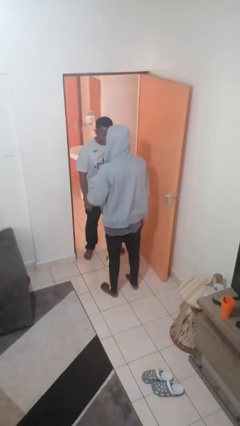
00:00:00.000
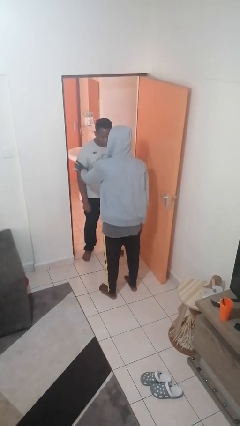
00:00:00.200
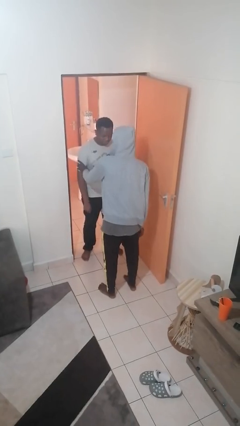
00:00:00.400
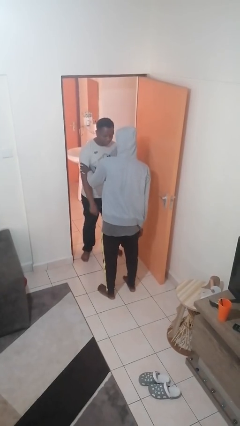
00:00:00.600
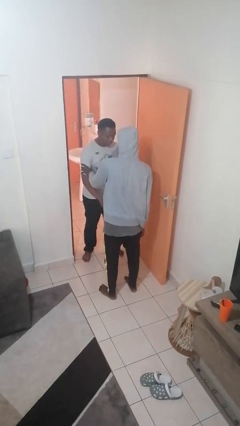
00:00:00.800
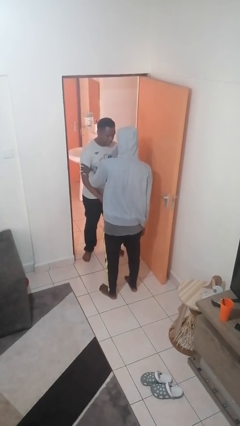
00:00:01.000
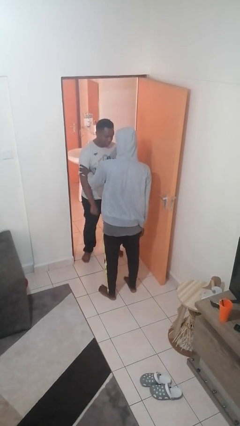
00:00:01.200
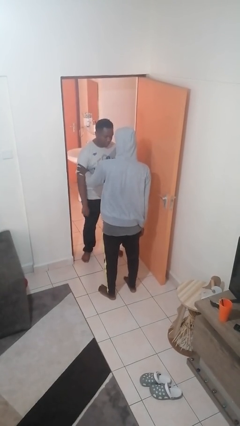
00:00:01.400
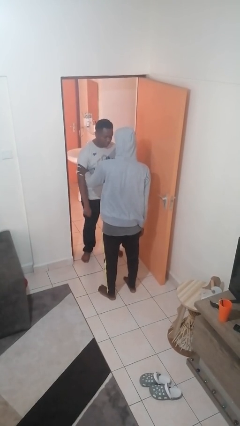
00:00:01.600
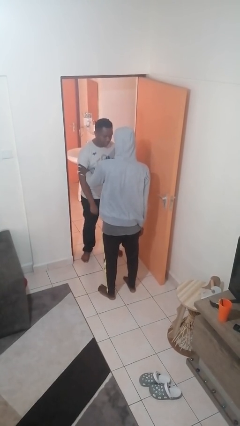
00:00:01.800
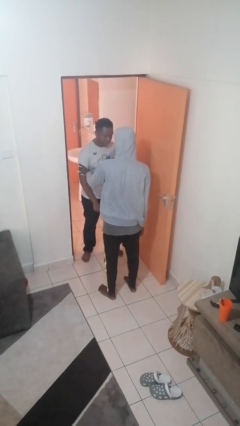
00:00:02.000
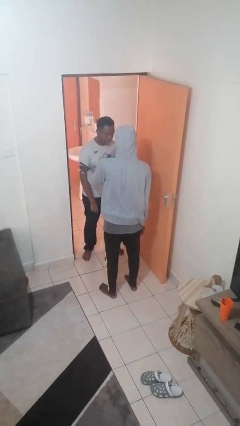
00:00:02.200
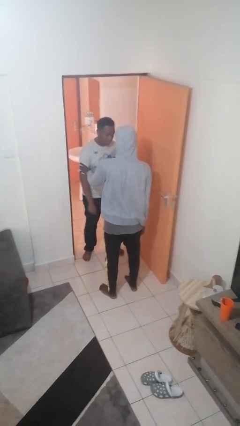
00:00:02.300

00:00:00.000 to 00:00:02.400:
person grabs person by bicep

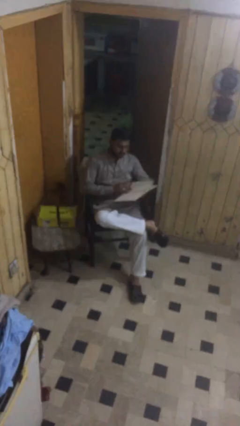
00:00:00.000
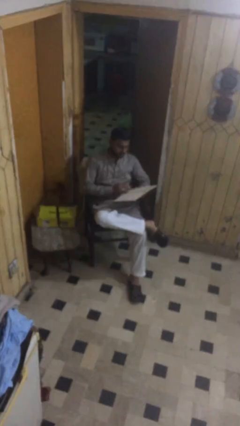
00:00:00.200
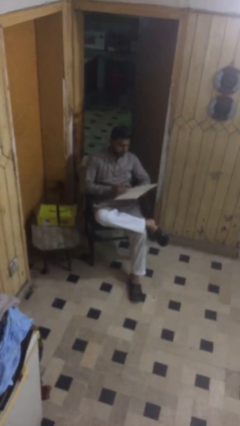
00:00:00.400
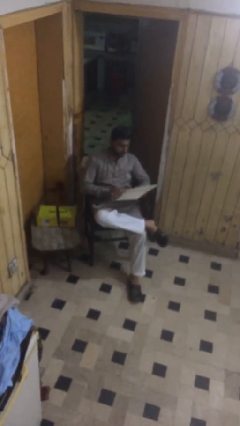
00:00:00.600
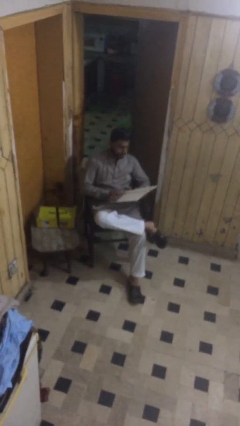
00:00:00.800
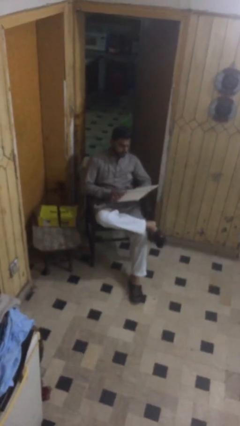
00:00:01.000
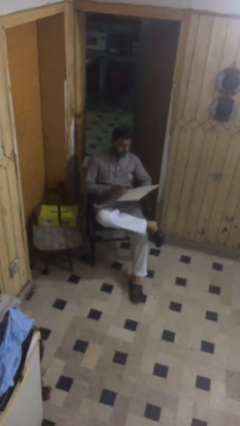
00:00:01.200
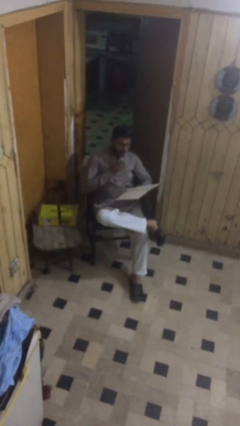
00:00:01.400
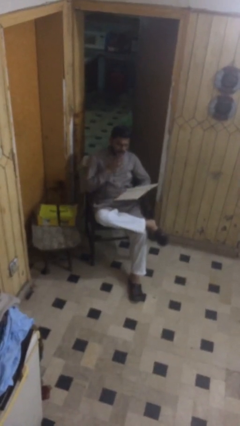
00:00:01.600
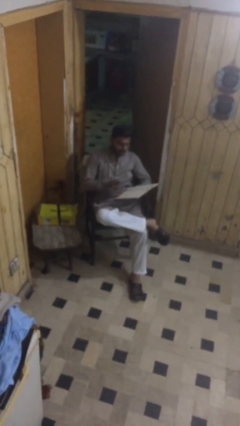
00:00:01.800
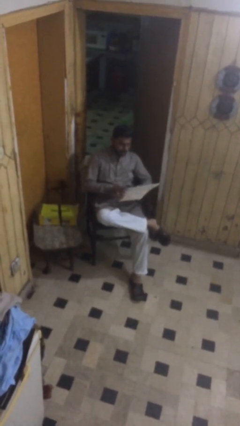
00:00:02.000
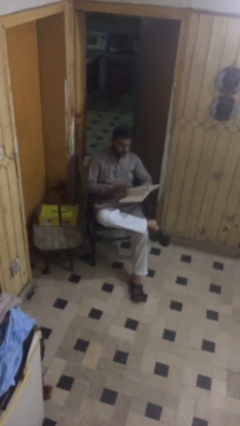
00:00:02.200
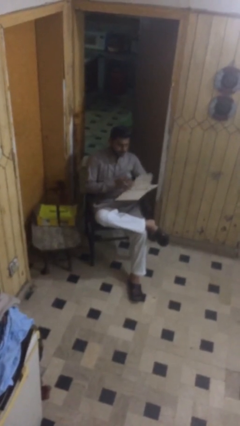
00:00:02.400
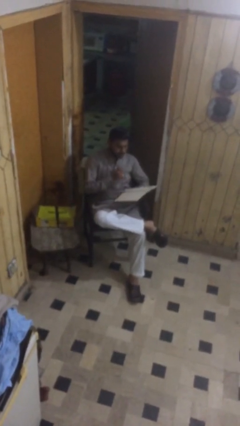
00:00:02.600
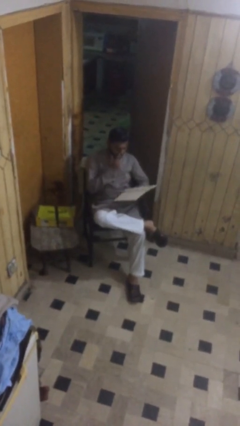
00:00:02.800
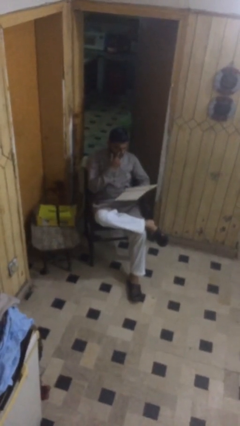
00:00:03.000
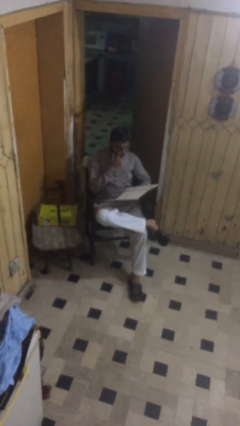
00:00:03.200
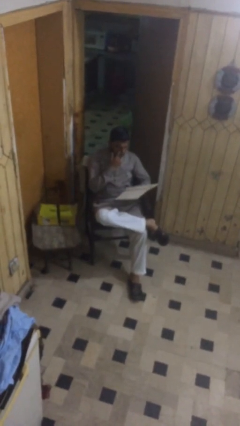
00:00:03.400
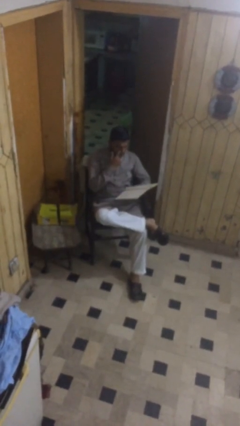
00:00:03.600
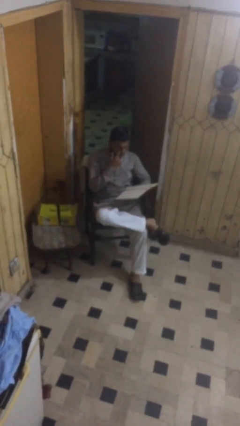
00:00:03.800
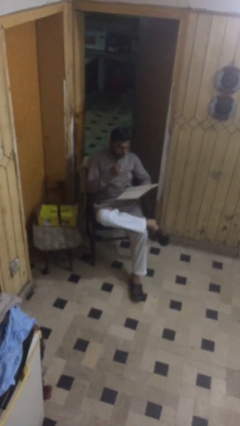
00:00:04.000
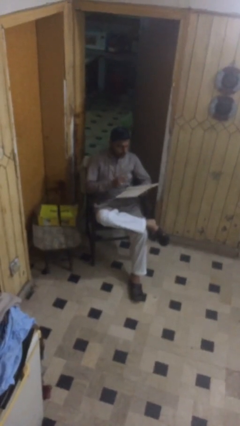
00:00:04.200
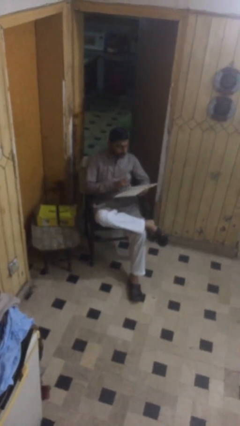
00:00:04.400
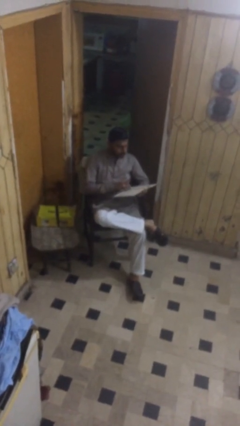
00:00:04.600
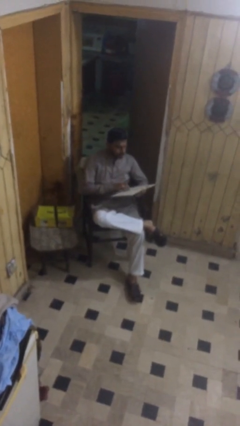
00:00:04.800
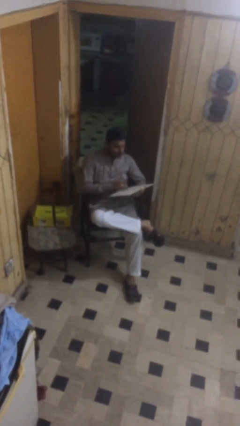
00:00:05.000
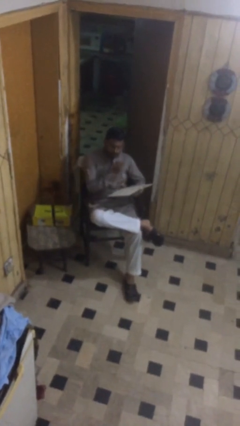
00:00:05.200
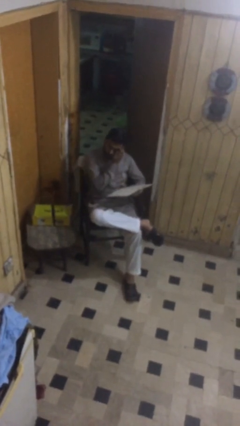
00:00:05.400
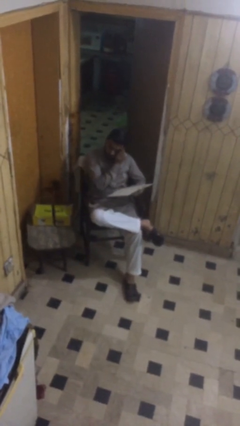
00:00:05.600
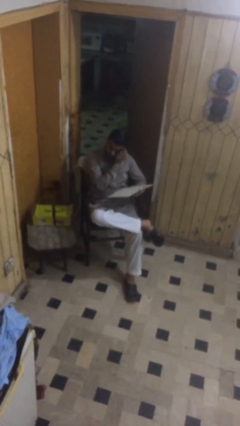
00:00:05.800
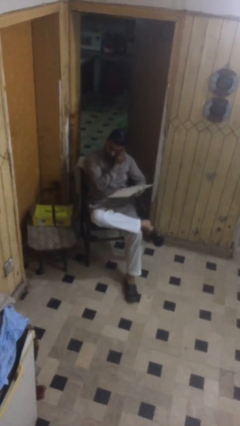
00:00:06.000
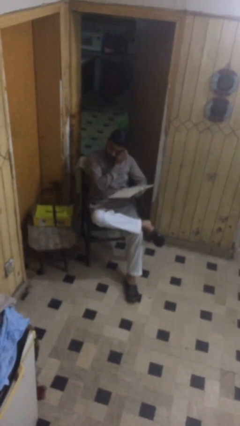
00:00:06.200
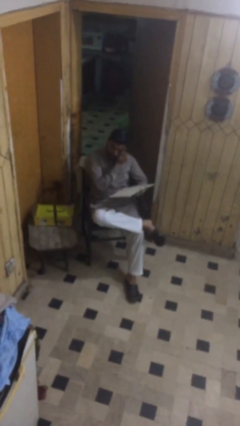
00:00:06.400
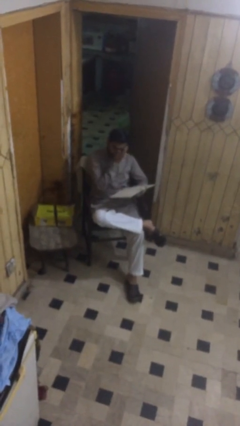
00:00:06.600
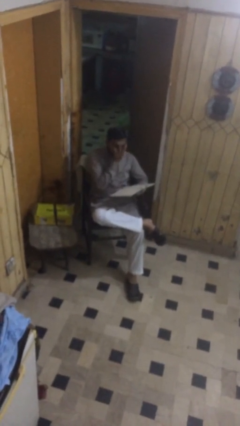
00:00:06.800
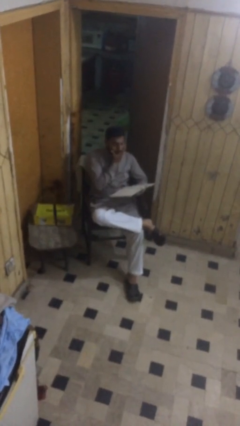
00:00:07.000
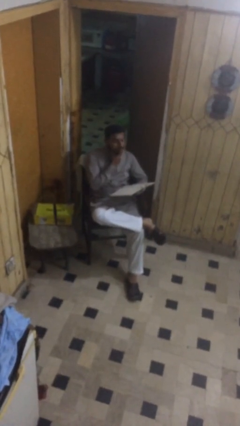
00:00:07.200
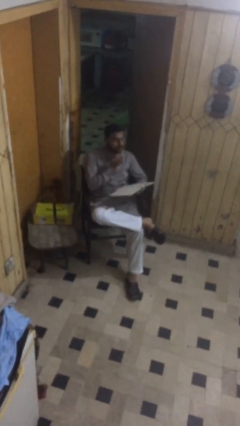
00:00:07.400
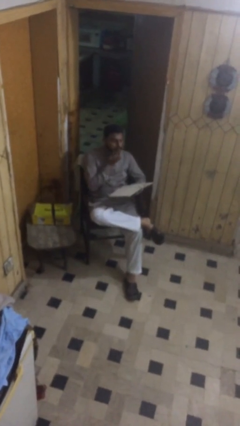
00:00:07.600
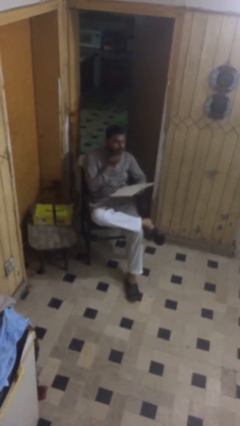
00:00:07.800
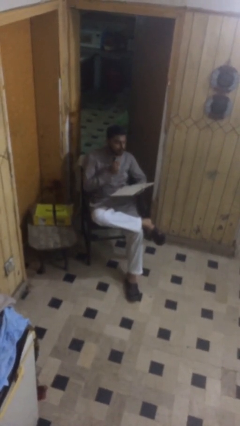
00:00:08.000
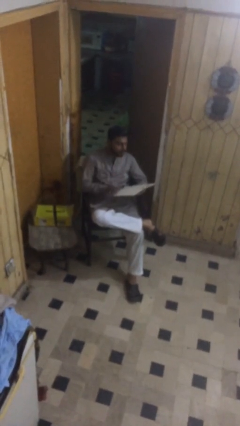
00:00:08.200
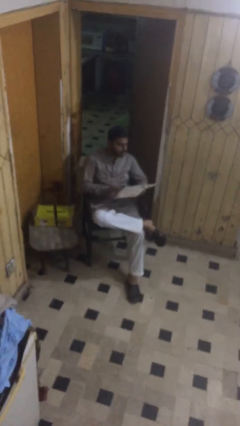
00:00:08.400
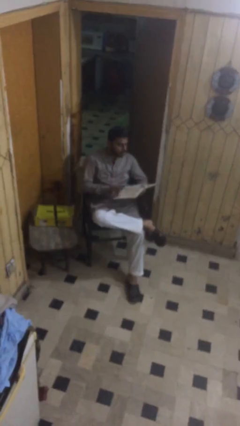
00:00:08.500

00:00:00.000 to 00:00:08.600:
person reads document

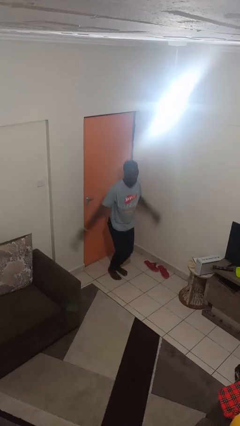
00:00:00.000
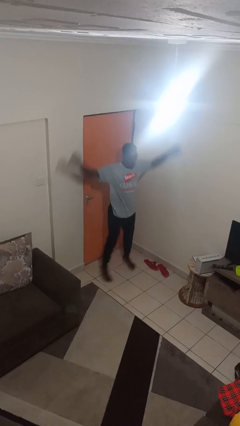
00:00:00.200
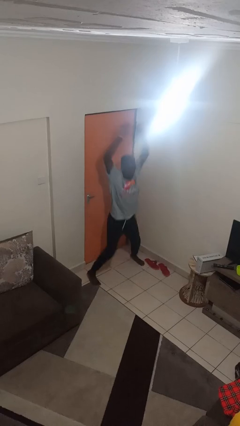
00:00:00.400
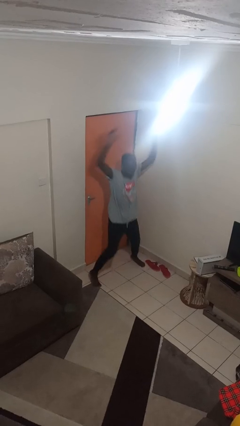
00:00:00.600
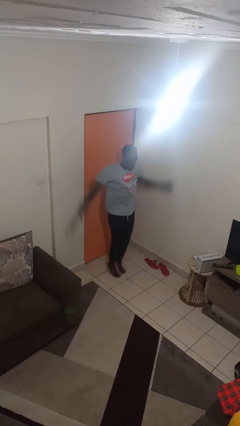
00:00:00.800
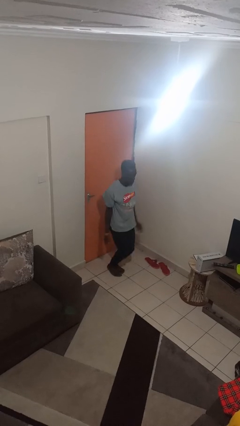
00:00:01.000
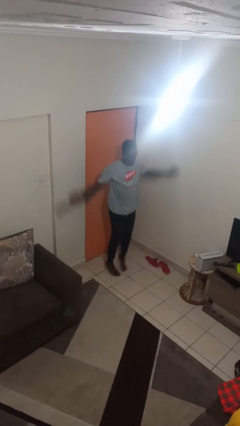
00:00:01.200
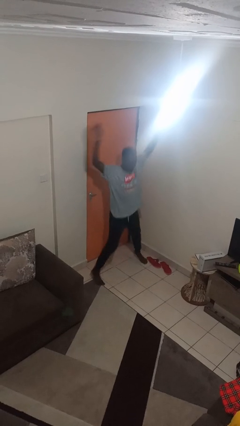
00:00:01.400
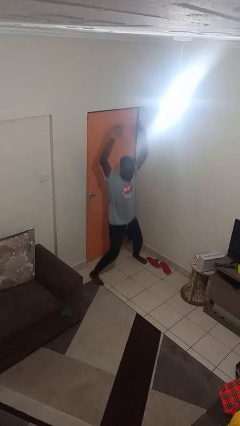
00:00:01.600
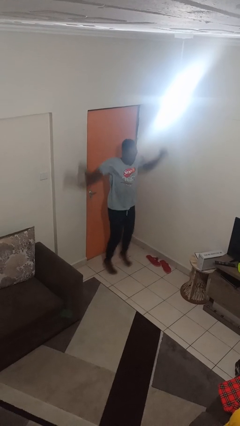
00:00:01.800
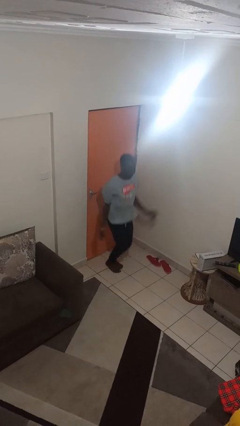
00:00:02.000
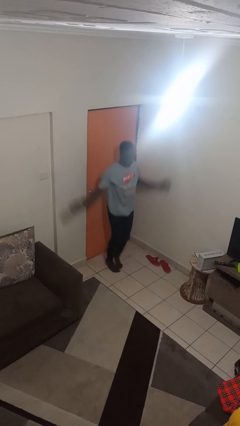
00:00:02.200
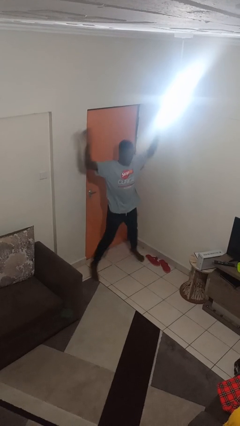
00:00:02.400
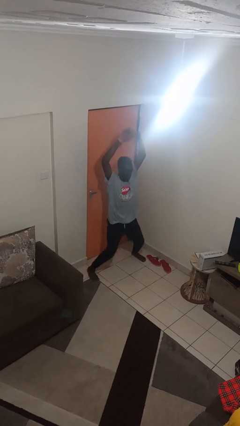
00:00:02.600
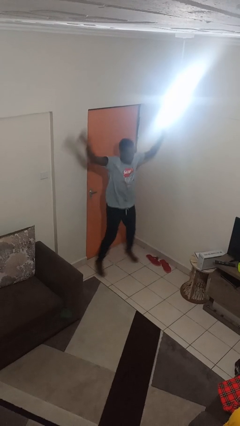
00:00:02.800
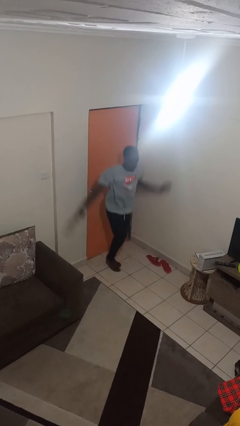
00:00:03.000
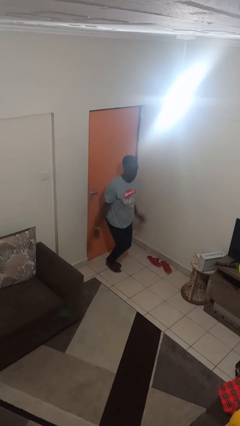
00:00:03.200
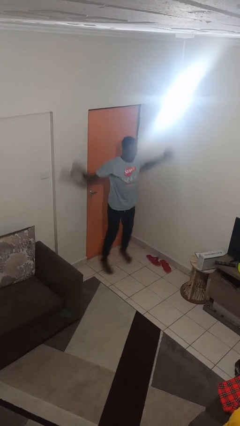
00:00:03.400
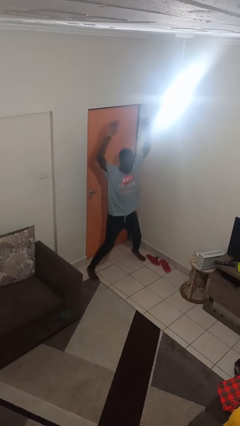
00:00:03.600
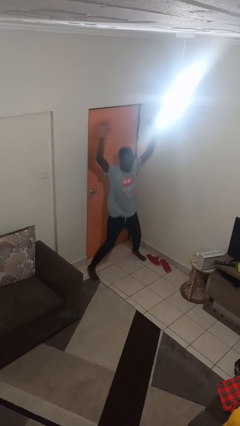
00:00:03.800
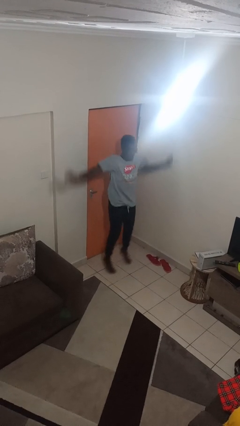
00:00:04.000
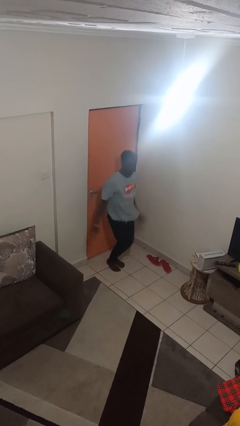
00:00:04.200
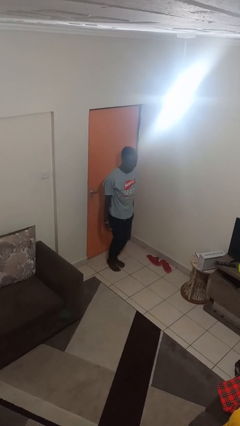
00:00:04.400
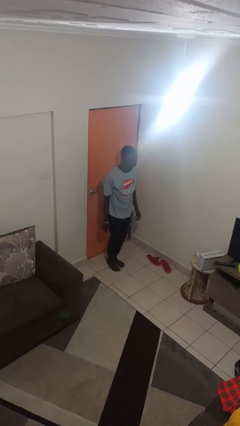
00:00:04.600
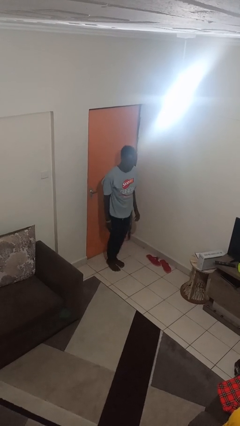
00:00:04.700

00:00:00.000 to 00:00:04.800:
person exercises with jumping jacks

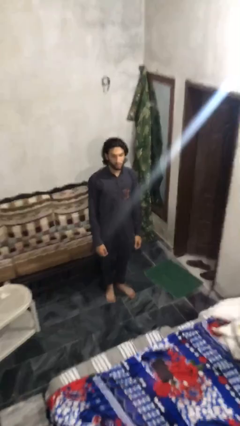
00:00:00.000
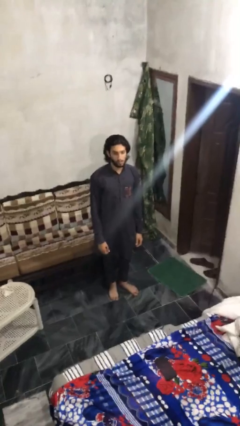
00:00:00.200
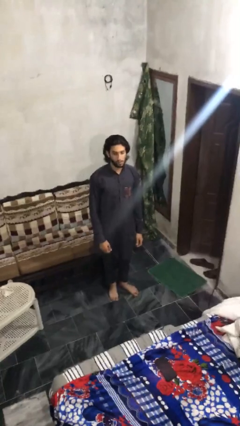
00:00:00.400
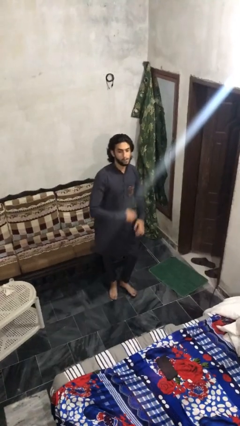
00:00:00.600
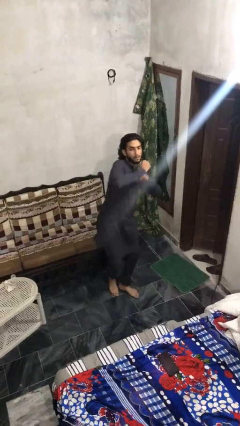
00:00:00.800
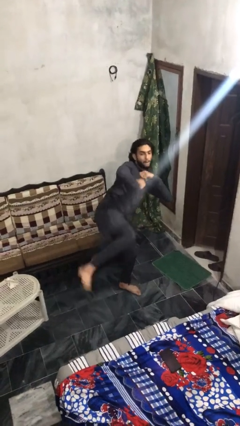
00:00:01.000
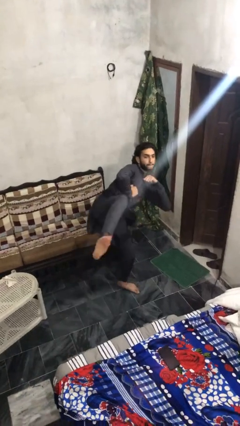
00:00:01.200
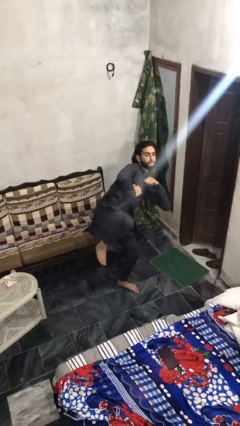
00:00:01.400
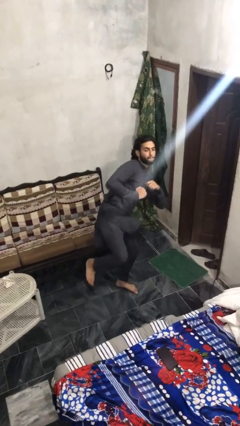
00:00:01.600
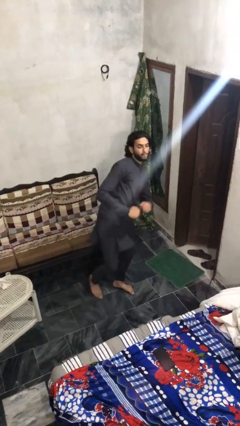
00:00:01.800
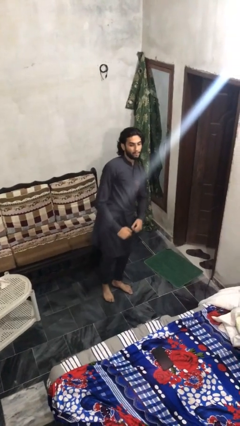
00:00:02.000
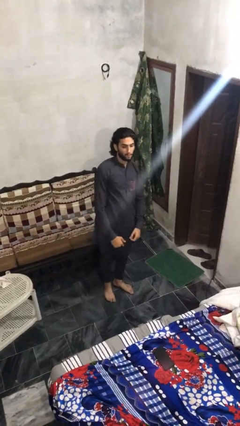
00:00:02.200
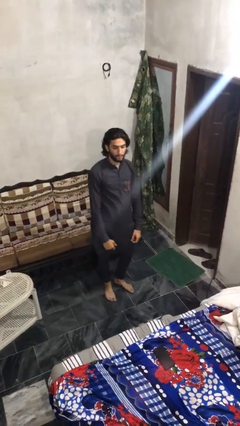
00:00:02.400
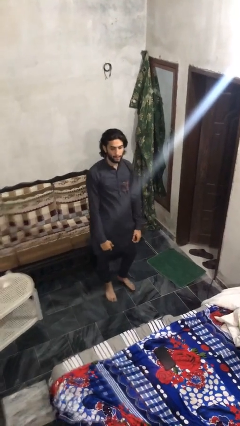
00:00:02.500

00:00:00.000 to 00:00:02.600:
person karate kicks

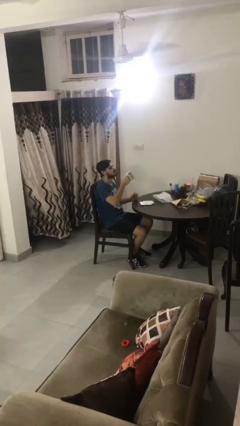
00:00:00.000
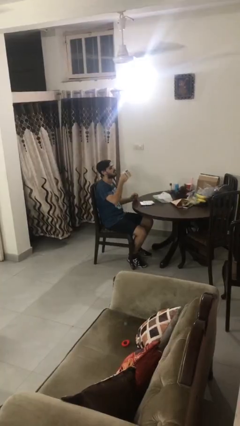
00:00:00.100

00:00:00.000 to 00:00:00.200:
person drinks from cup
